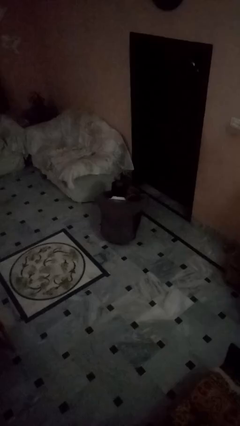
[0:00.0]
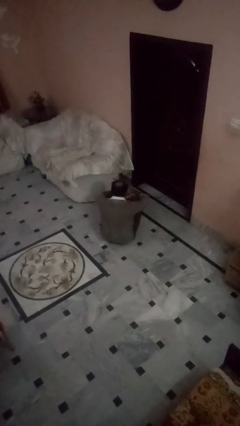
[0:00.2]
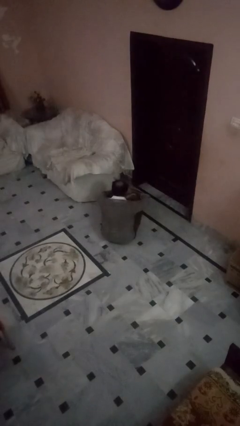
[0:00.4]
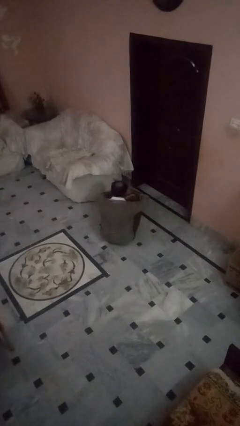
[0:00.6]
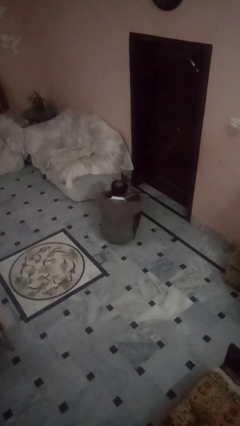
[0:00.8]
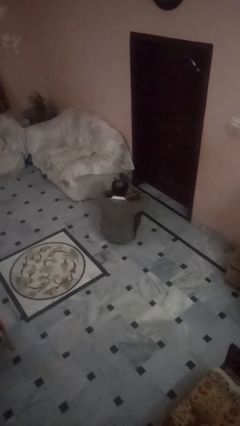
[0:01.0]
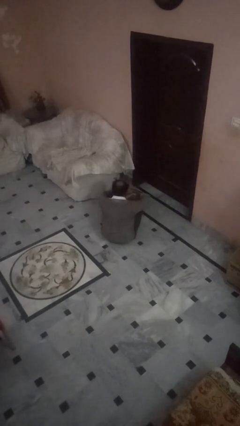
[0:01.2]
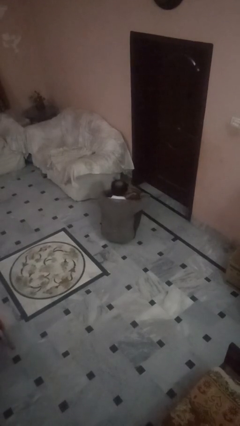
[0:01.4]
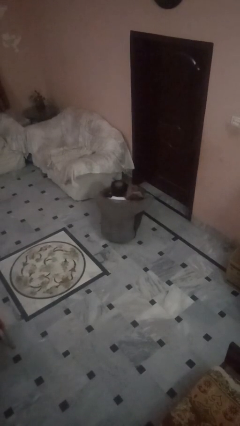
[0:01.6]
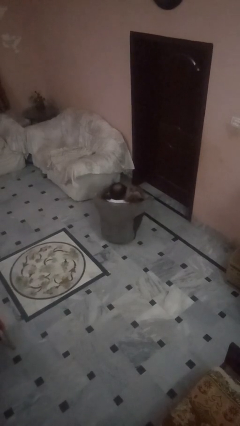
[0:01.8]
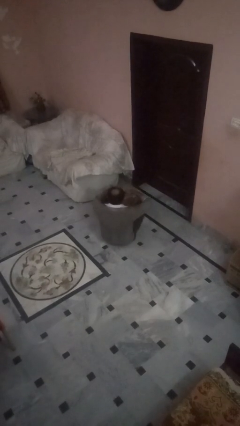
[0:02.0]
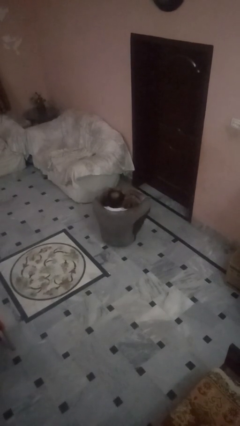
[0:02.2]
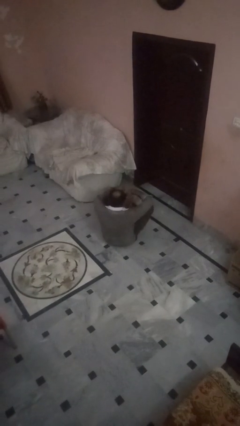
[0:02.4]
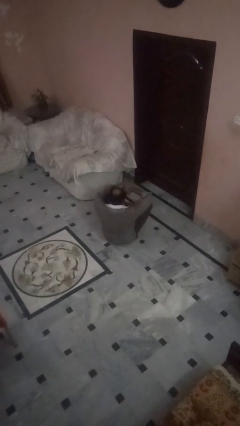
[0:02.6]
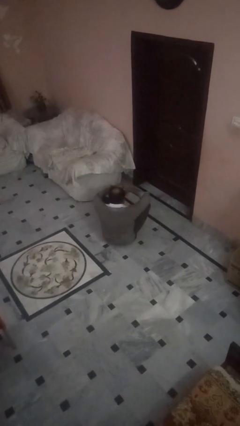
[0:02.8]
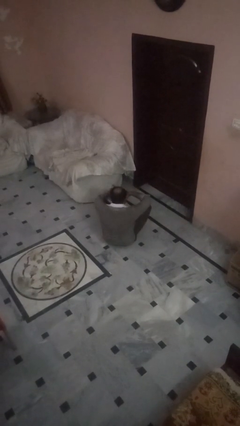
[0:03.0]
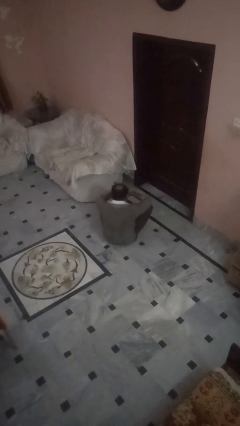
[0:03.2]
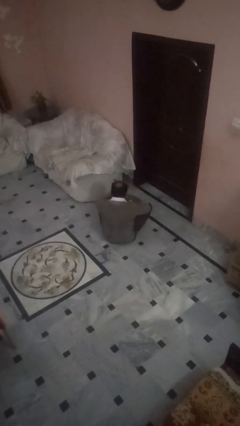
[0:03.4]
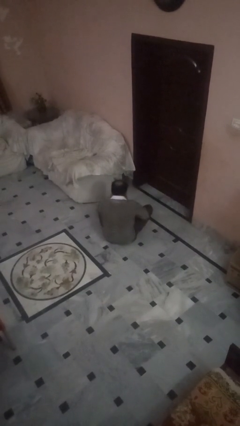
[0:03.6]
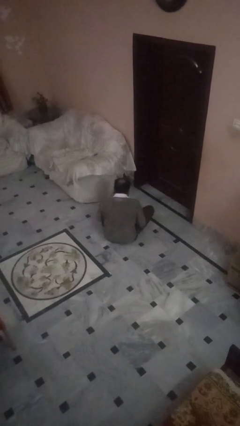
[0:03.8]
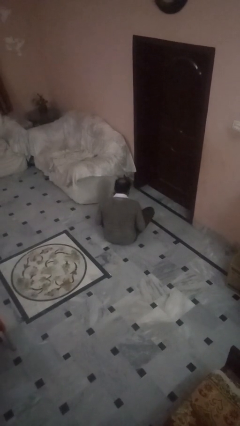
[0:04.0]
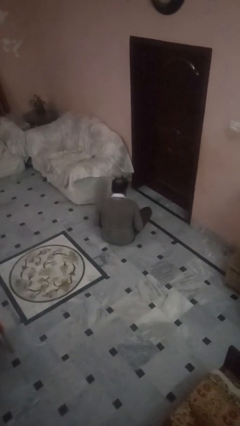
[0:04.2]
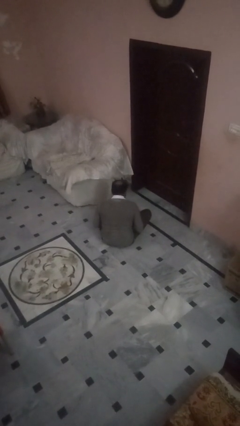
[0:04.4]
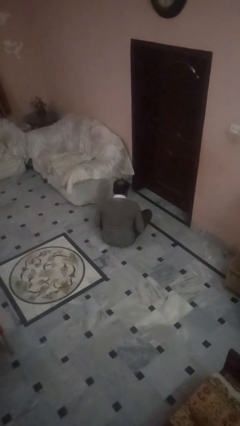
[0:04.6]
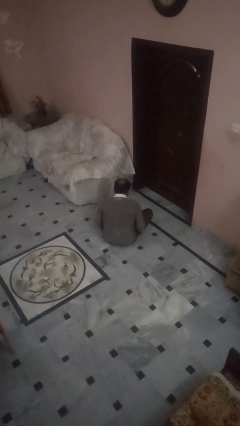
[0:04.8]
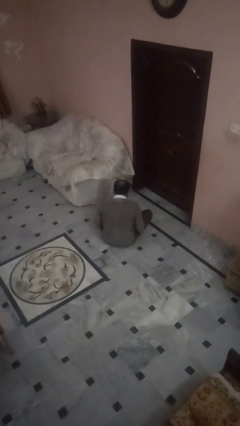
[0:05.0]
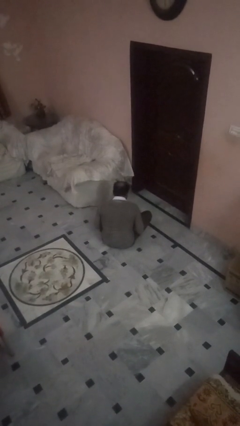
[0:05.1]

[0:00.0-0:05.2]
person crosses legs

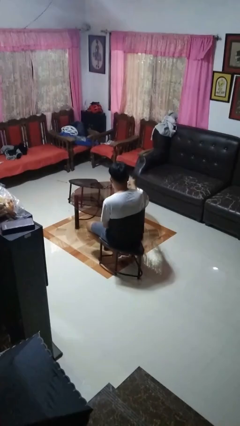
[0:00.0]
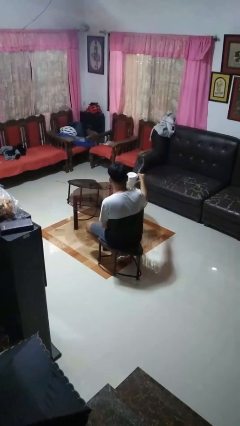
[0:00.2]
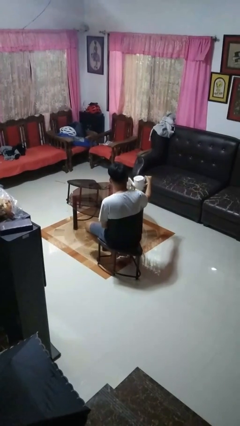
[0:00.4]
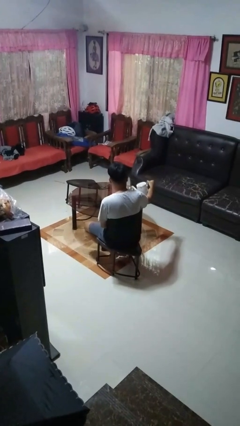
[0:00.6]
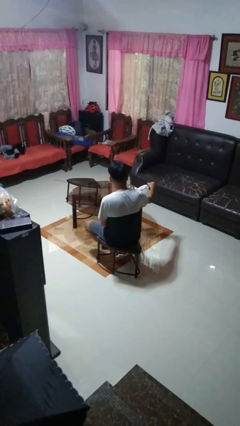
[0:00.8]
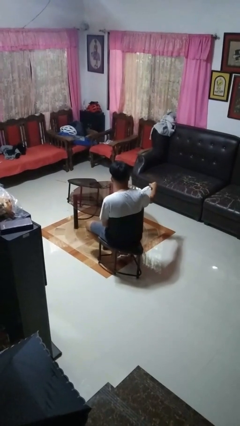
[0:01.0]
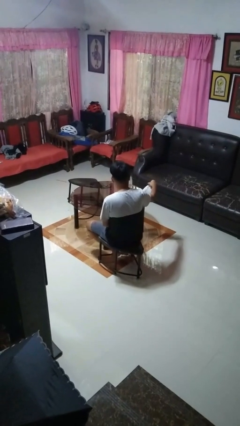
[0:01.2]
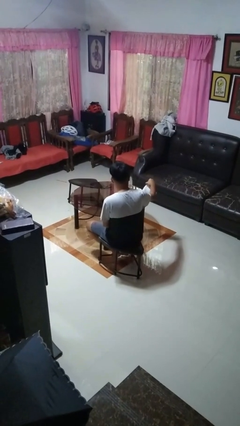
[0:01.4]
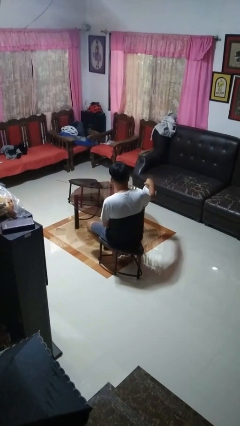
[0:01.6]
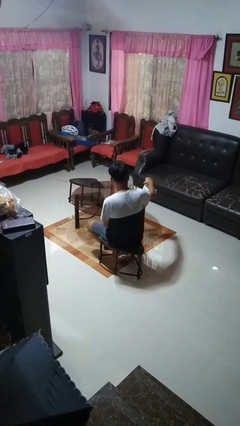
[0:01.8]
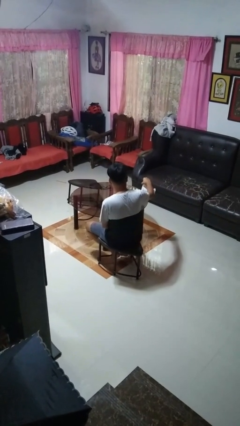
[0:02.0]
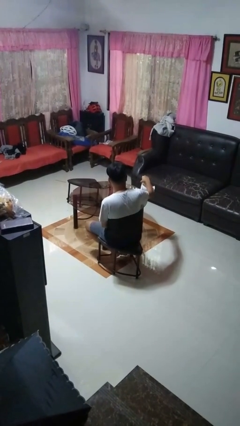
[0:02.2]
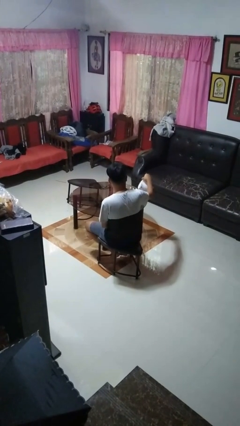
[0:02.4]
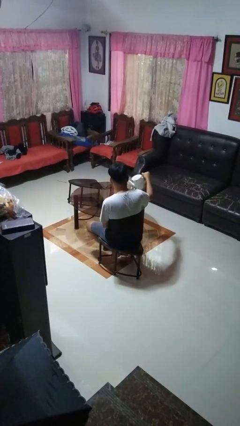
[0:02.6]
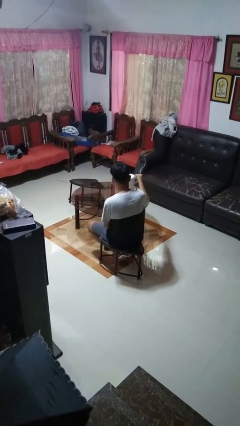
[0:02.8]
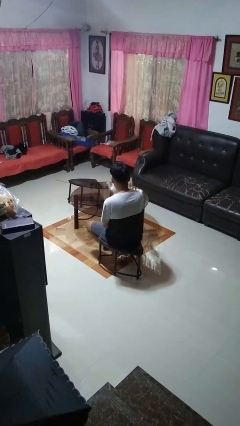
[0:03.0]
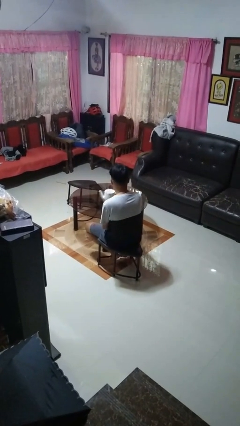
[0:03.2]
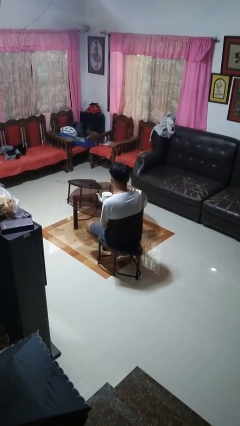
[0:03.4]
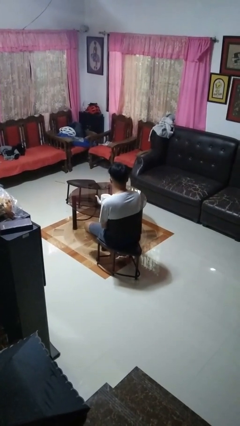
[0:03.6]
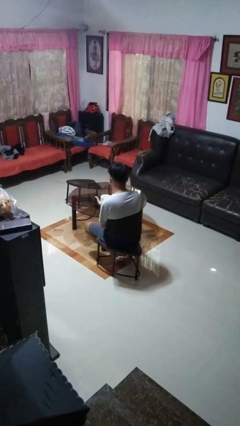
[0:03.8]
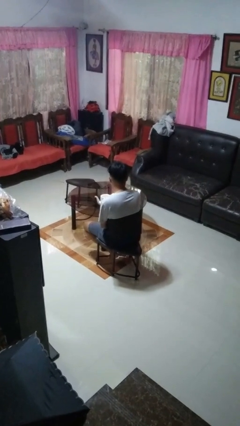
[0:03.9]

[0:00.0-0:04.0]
person pours coffee into mug

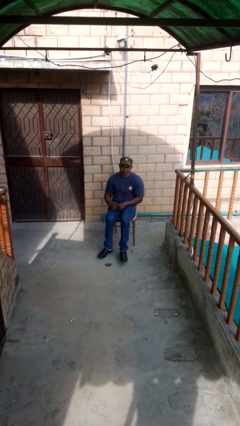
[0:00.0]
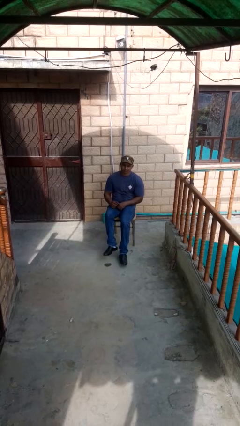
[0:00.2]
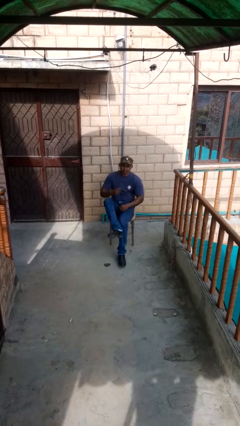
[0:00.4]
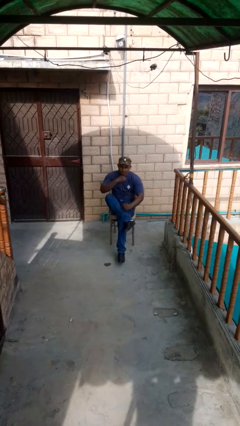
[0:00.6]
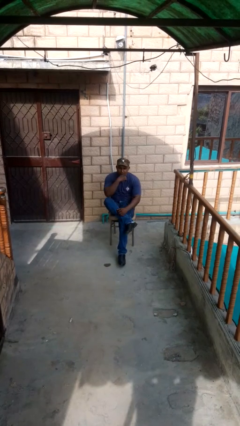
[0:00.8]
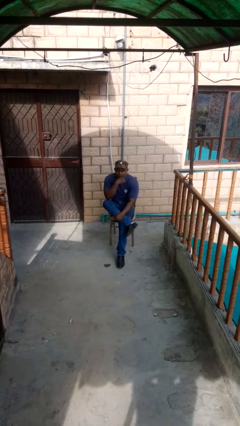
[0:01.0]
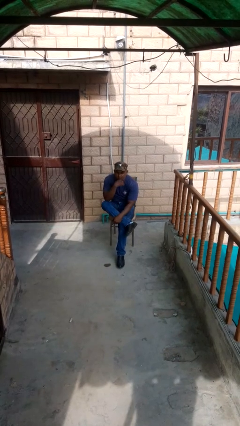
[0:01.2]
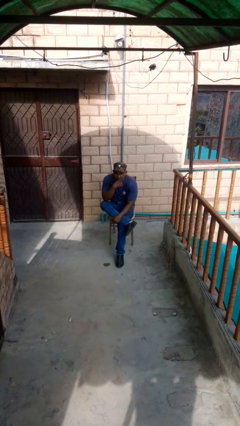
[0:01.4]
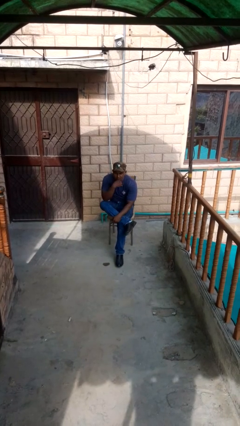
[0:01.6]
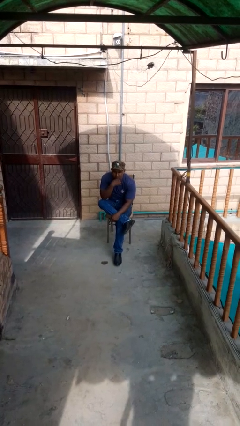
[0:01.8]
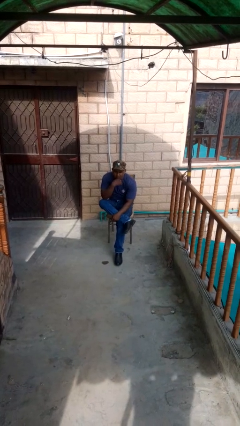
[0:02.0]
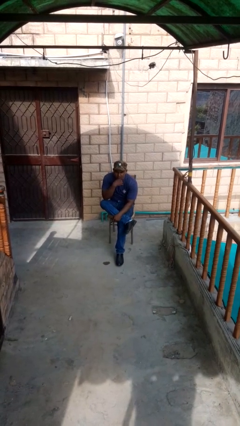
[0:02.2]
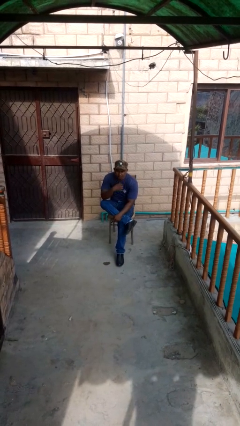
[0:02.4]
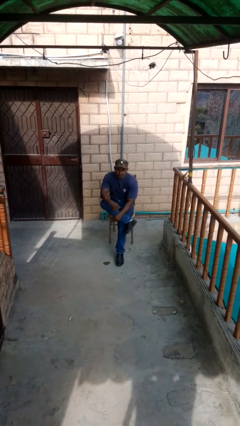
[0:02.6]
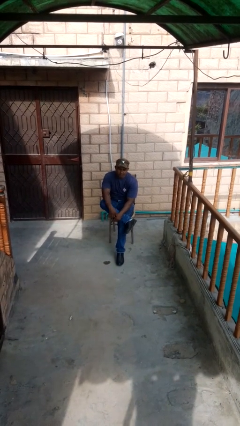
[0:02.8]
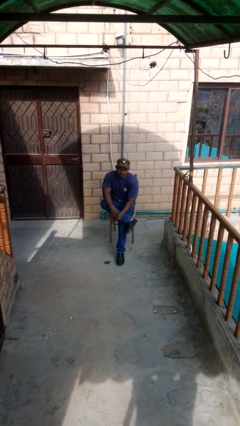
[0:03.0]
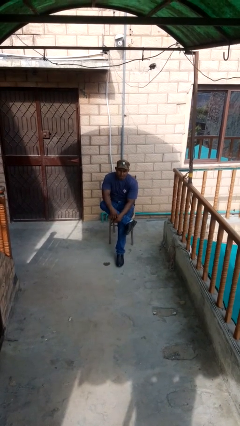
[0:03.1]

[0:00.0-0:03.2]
person strokes chin

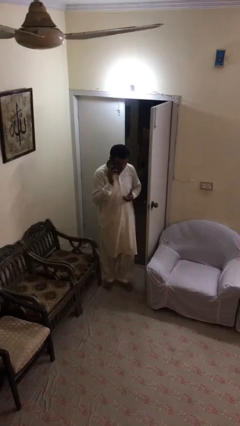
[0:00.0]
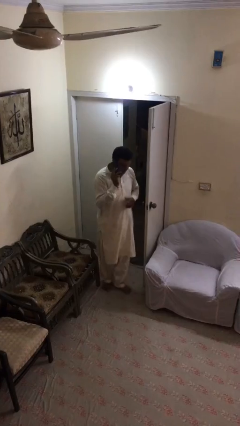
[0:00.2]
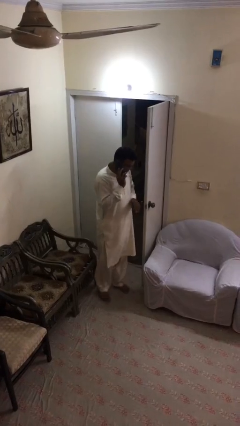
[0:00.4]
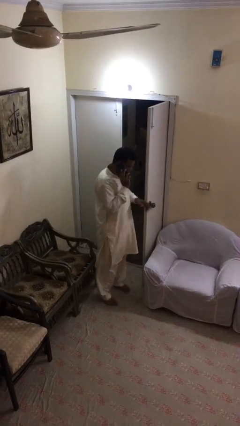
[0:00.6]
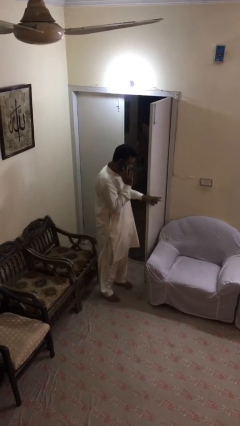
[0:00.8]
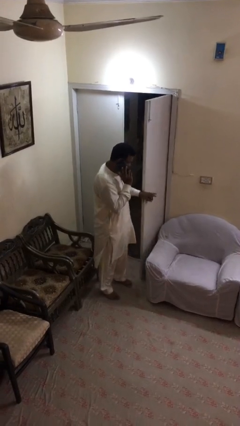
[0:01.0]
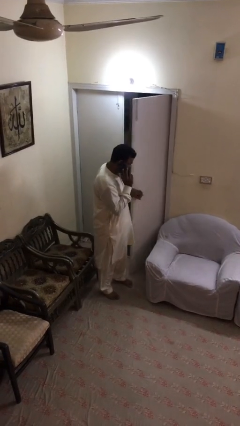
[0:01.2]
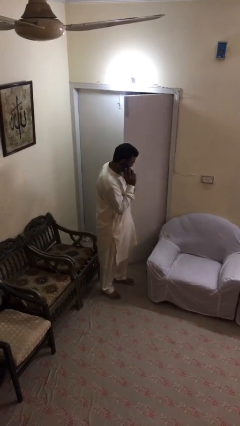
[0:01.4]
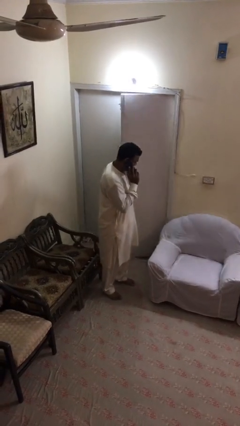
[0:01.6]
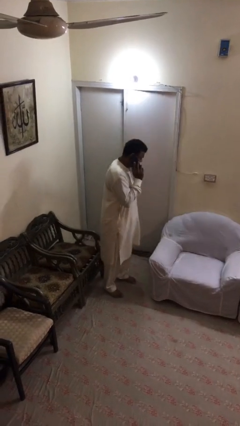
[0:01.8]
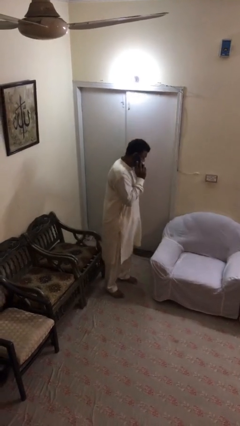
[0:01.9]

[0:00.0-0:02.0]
person closes facility door

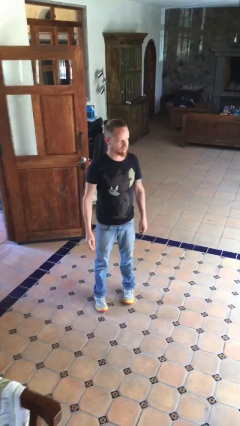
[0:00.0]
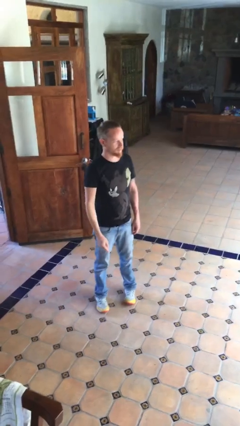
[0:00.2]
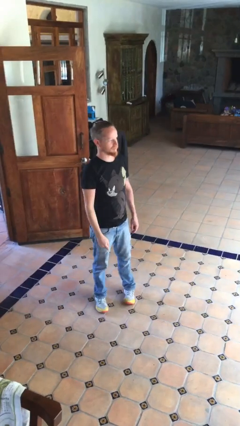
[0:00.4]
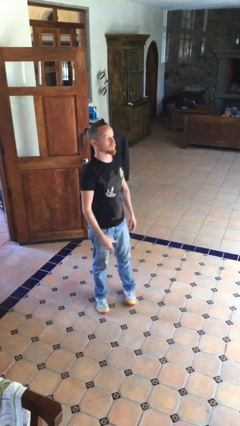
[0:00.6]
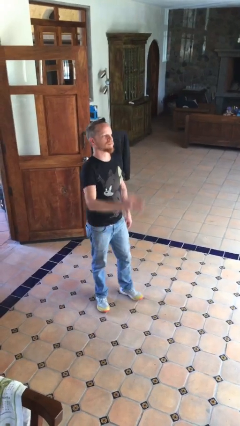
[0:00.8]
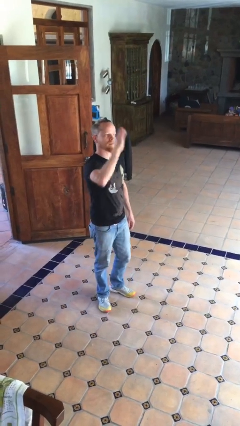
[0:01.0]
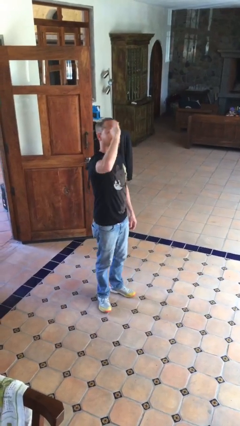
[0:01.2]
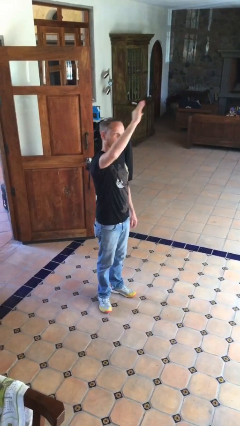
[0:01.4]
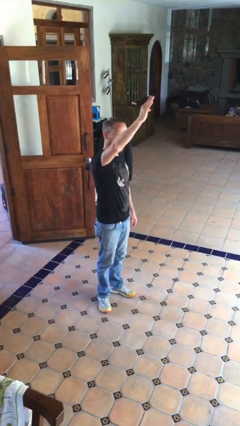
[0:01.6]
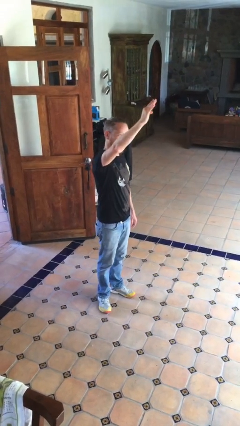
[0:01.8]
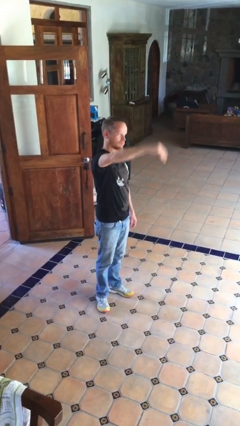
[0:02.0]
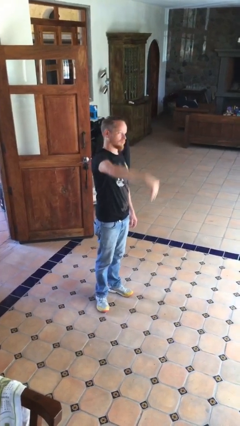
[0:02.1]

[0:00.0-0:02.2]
person salutes

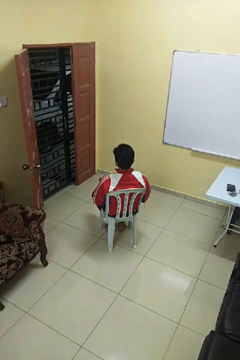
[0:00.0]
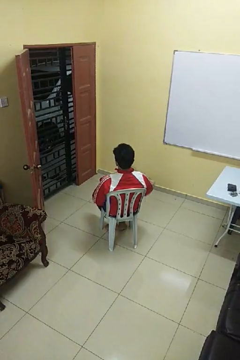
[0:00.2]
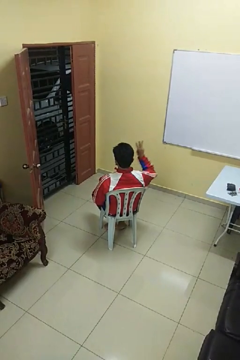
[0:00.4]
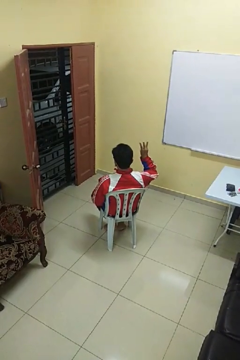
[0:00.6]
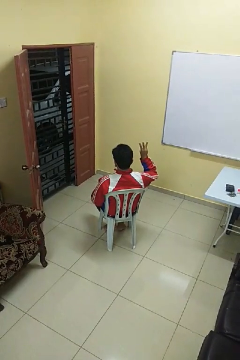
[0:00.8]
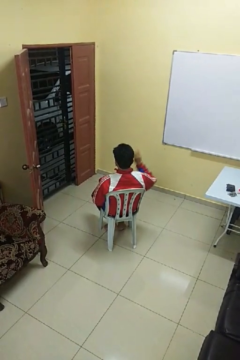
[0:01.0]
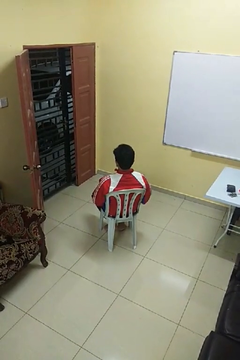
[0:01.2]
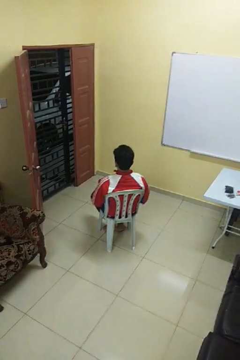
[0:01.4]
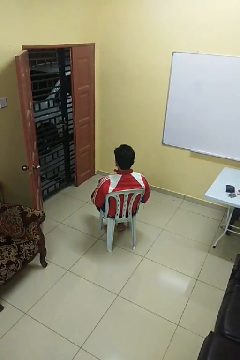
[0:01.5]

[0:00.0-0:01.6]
person gestures number three
